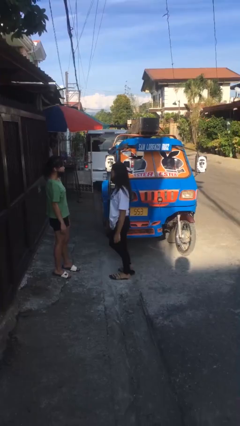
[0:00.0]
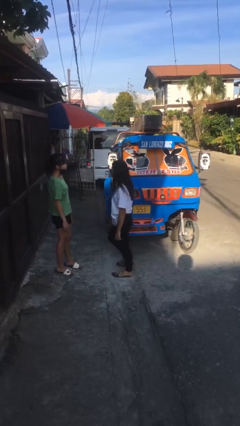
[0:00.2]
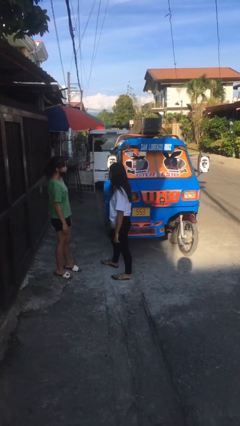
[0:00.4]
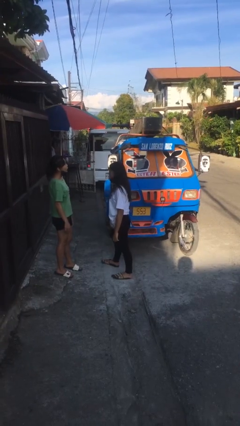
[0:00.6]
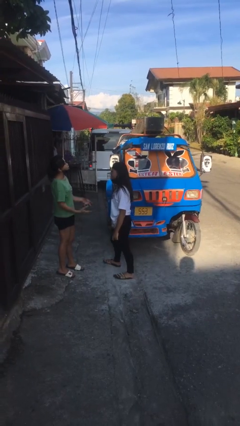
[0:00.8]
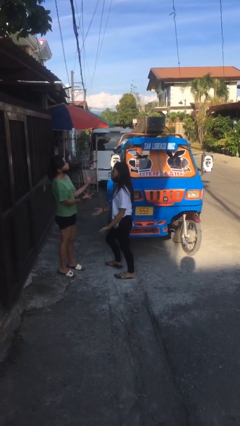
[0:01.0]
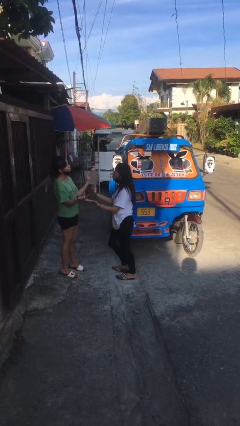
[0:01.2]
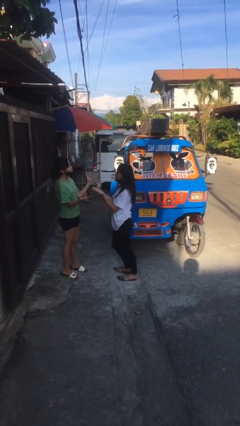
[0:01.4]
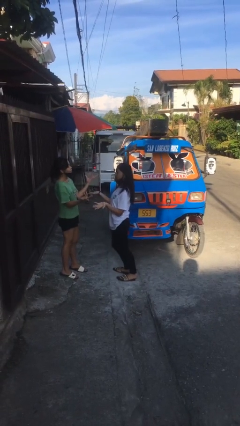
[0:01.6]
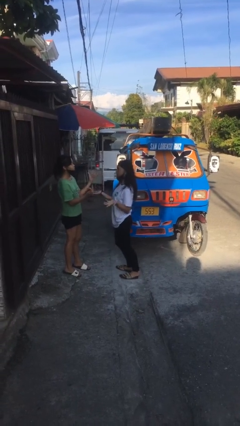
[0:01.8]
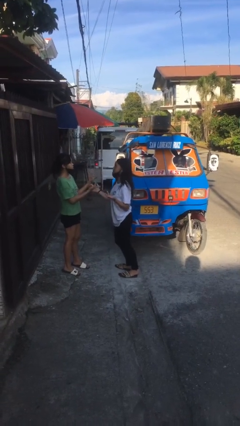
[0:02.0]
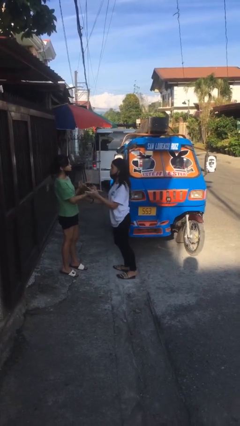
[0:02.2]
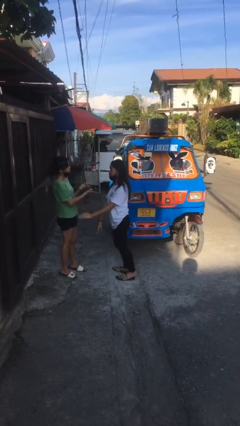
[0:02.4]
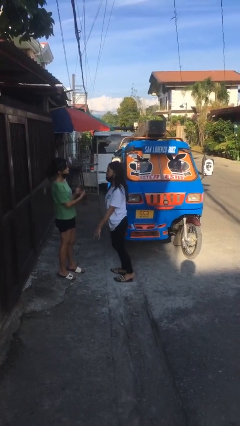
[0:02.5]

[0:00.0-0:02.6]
person talks to person

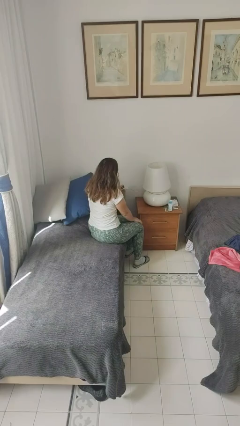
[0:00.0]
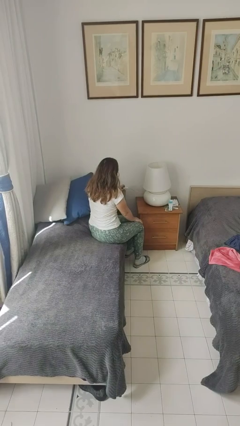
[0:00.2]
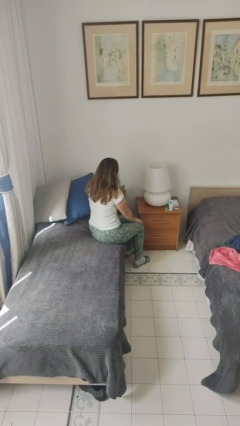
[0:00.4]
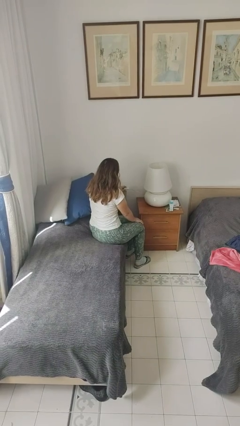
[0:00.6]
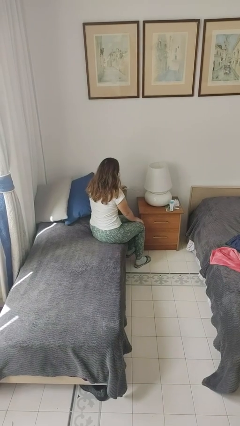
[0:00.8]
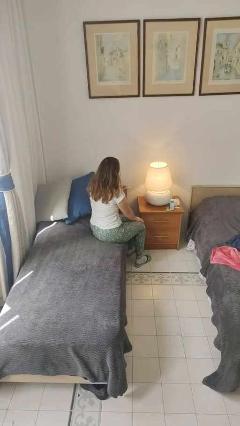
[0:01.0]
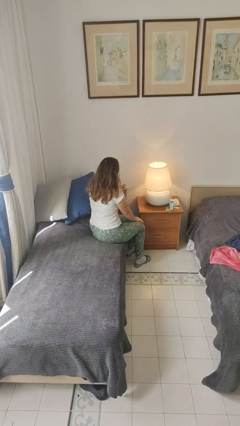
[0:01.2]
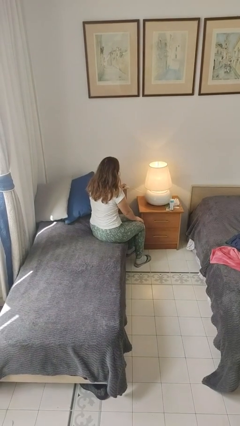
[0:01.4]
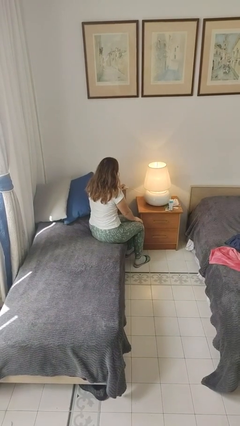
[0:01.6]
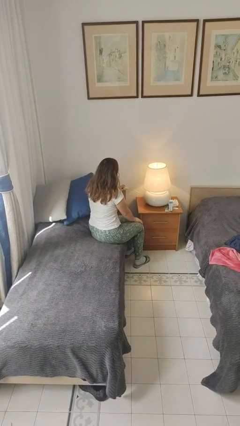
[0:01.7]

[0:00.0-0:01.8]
person turns on lamp

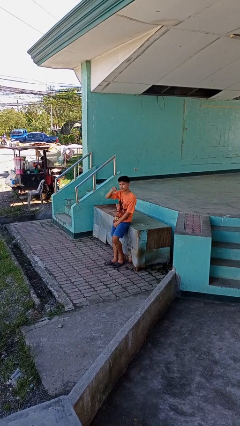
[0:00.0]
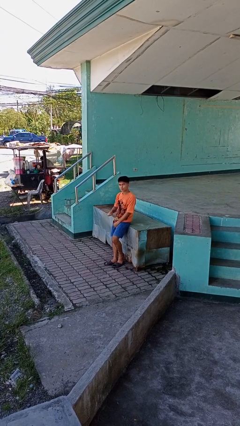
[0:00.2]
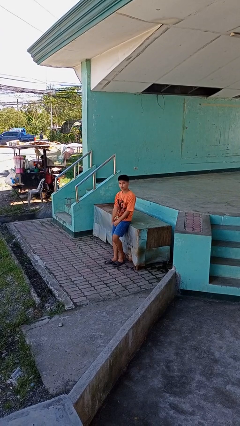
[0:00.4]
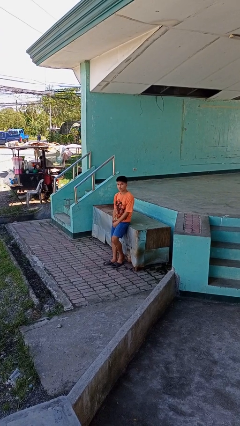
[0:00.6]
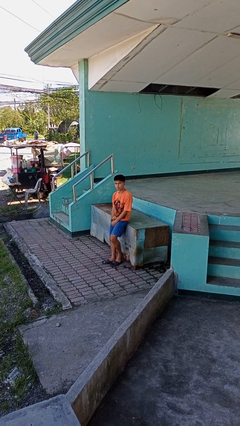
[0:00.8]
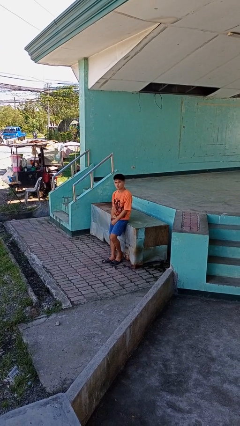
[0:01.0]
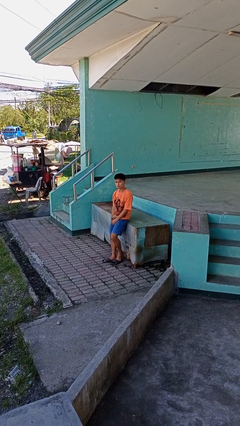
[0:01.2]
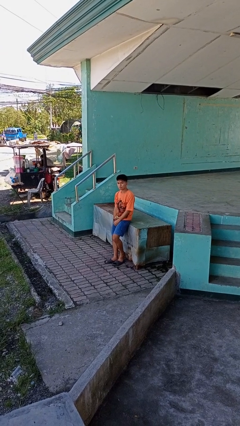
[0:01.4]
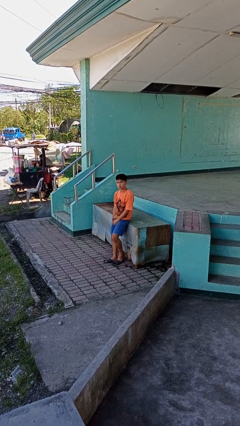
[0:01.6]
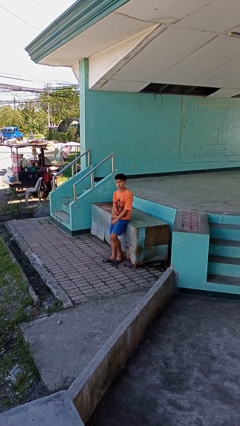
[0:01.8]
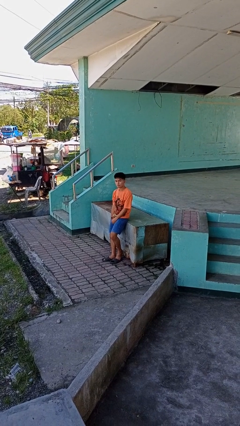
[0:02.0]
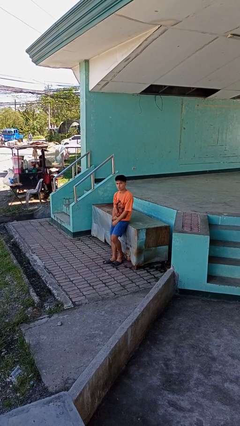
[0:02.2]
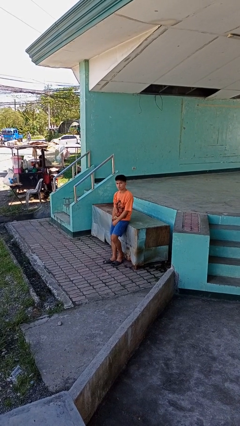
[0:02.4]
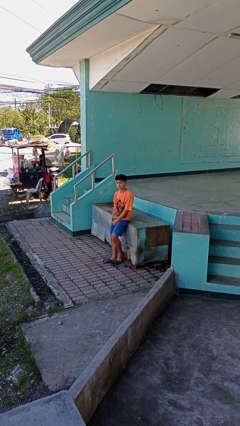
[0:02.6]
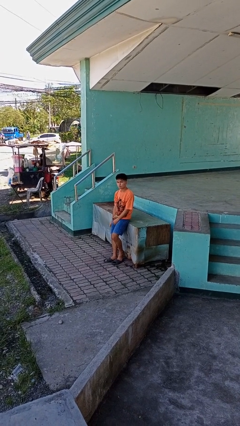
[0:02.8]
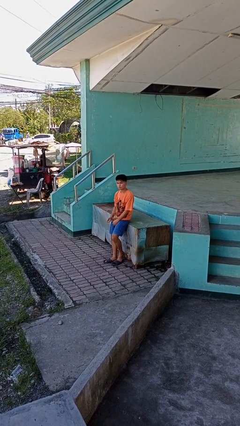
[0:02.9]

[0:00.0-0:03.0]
person gestures lower hand

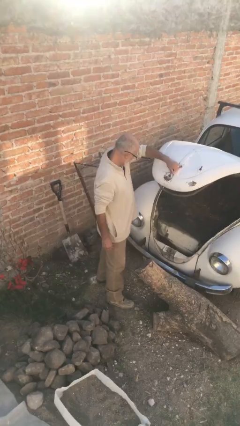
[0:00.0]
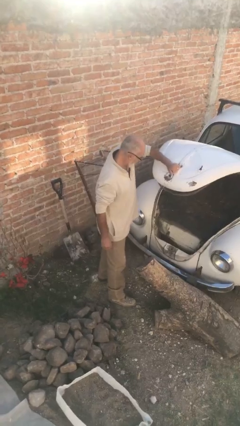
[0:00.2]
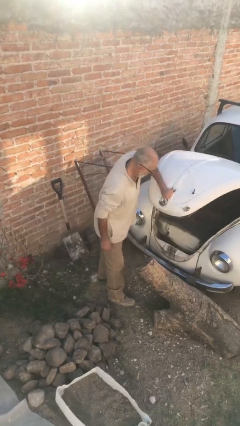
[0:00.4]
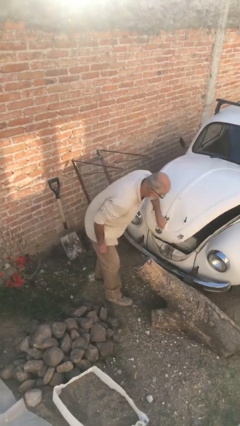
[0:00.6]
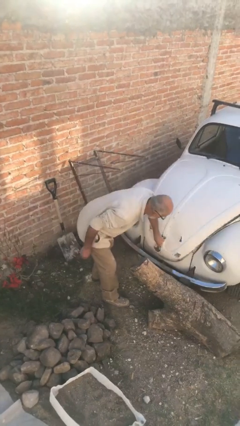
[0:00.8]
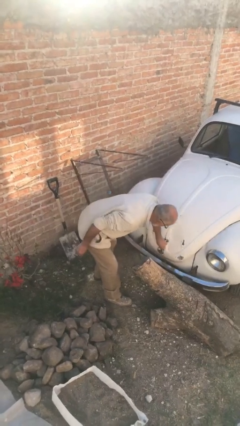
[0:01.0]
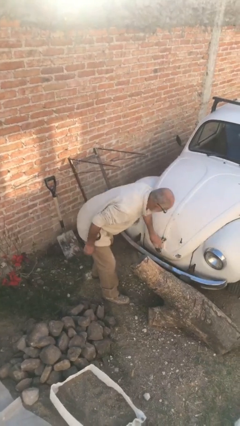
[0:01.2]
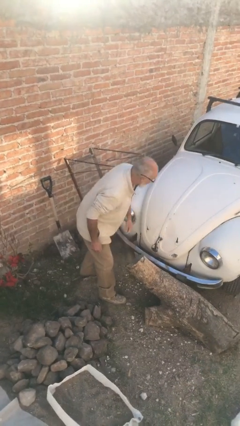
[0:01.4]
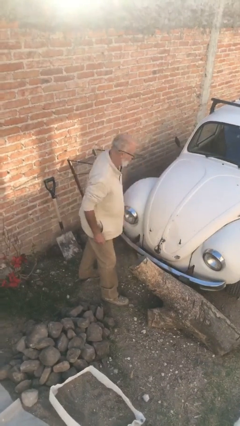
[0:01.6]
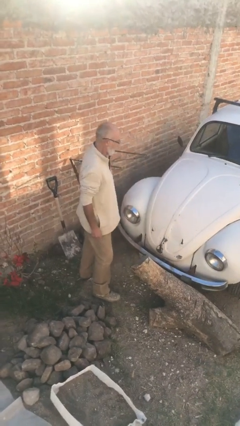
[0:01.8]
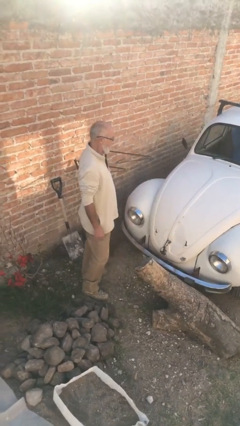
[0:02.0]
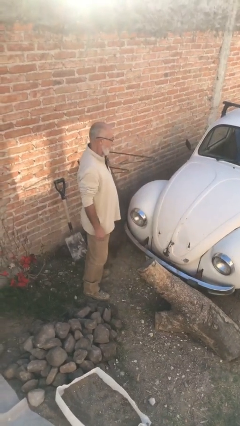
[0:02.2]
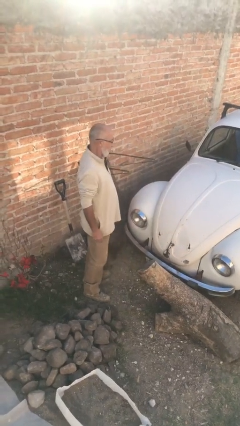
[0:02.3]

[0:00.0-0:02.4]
person closes car trunk

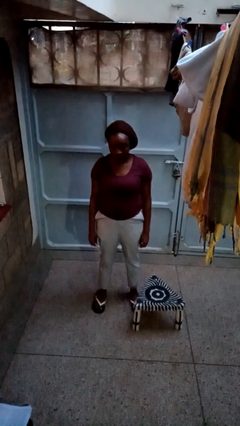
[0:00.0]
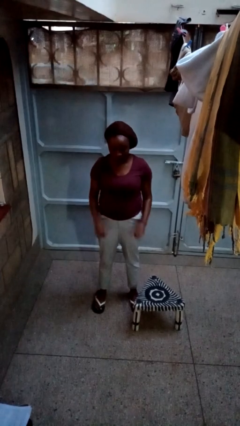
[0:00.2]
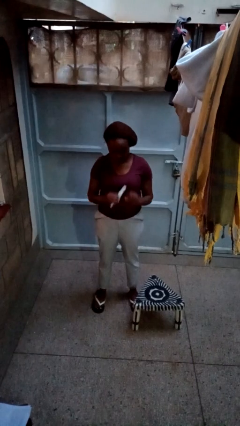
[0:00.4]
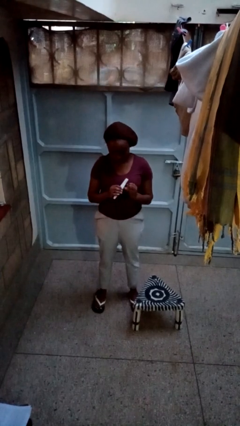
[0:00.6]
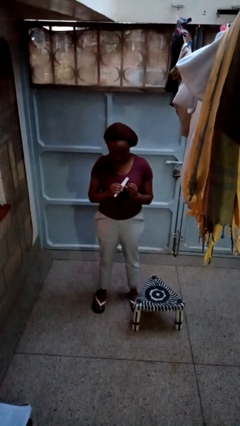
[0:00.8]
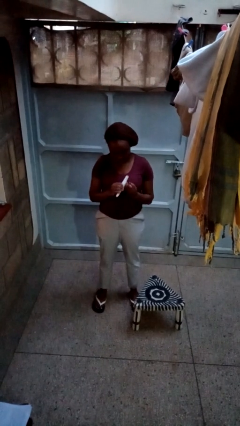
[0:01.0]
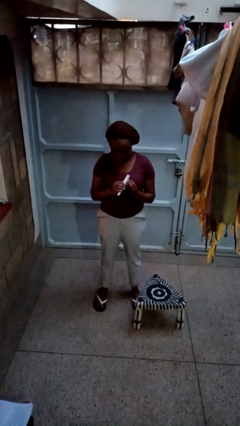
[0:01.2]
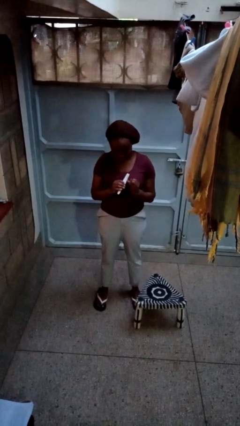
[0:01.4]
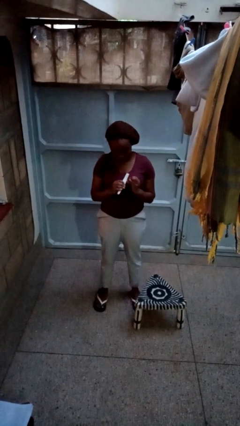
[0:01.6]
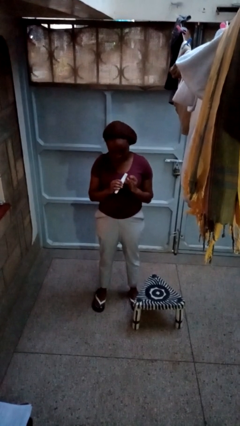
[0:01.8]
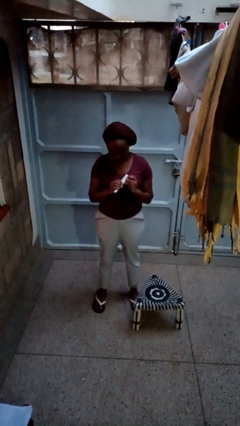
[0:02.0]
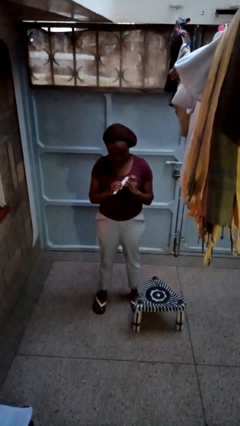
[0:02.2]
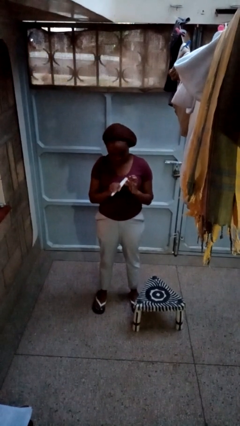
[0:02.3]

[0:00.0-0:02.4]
person files fingernails

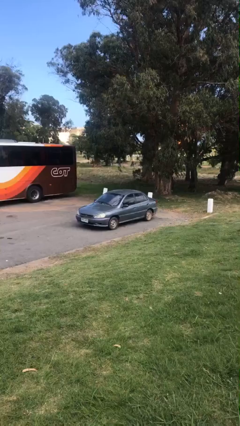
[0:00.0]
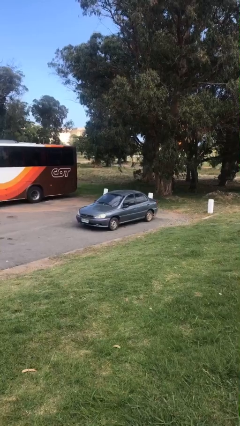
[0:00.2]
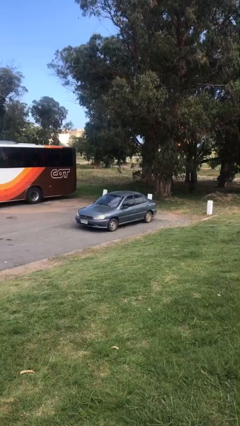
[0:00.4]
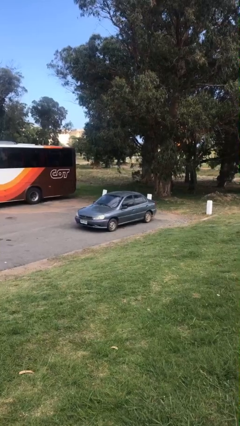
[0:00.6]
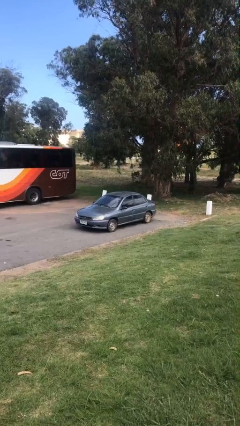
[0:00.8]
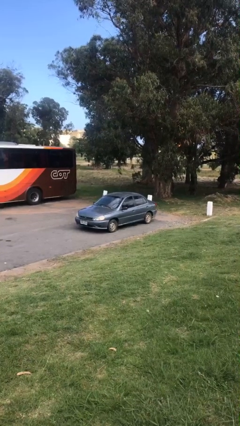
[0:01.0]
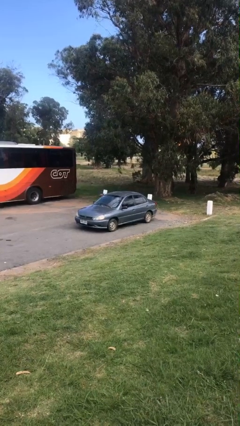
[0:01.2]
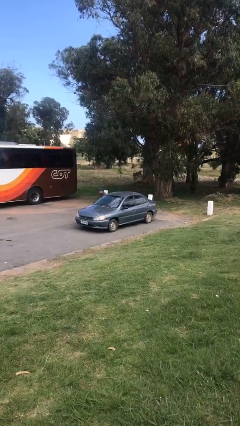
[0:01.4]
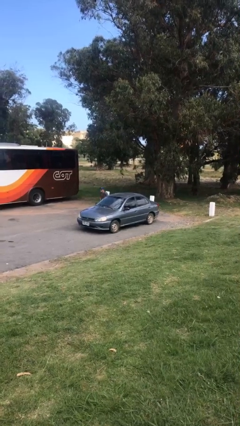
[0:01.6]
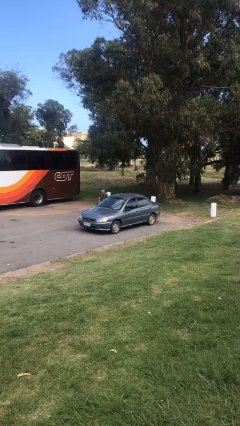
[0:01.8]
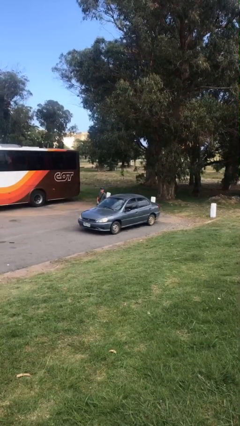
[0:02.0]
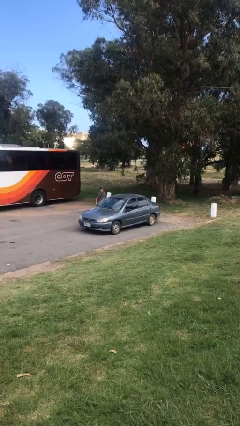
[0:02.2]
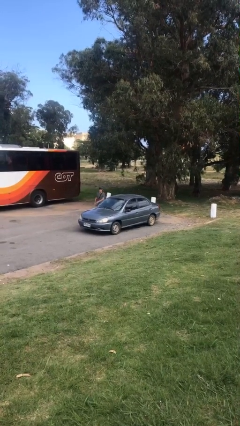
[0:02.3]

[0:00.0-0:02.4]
car drops off person

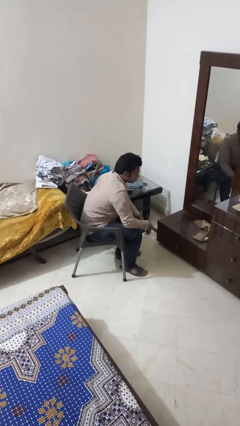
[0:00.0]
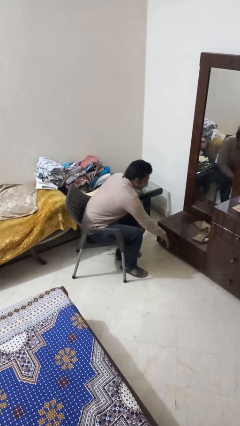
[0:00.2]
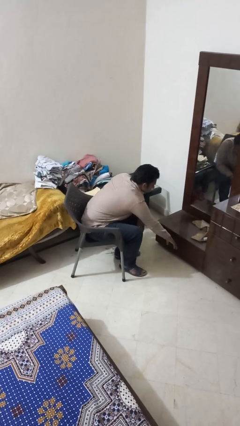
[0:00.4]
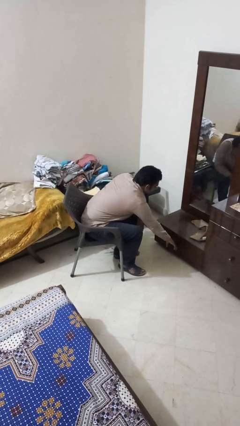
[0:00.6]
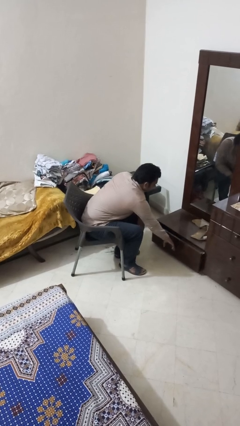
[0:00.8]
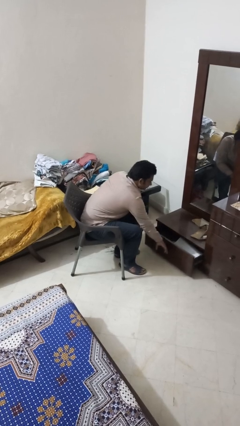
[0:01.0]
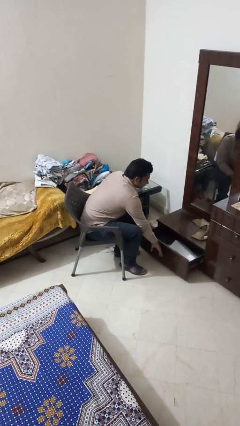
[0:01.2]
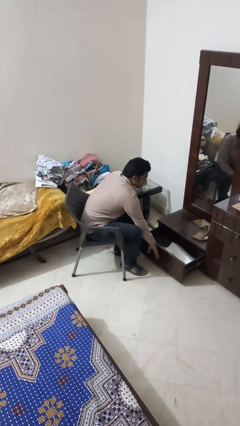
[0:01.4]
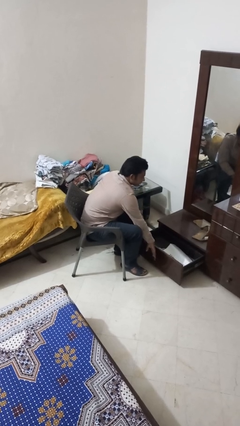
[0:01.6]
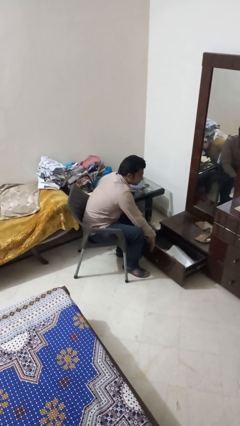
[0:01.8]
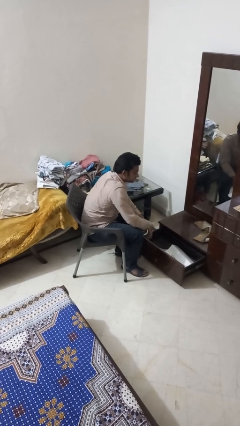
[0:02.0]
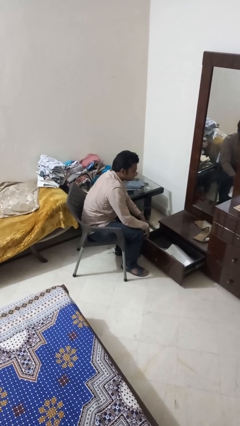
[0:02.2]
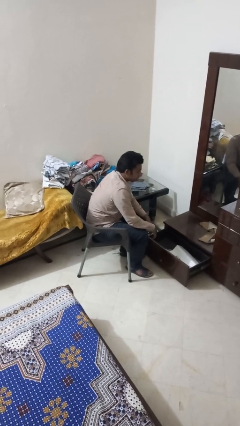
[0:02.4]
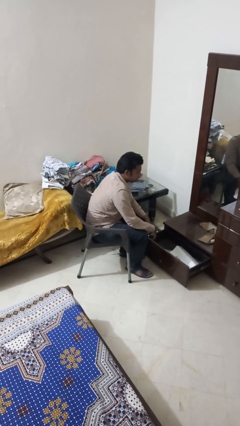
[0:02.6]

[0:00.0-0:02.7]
person opens dresser drawer
